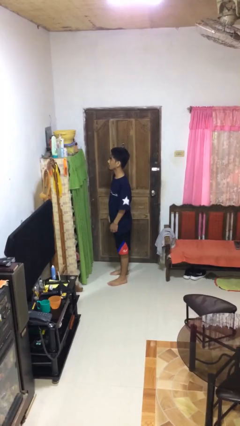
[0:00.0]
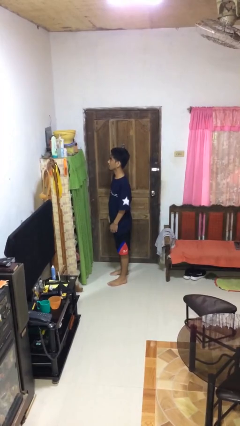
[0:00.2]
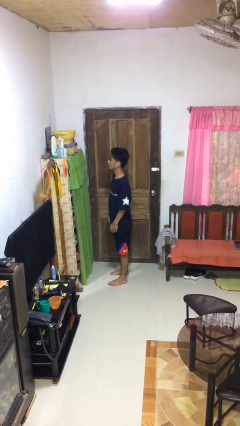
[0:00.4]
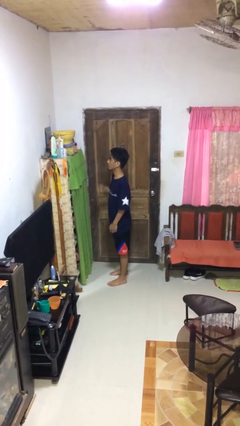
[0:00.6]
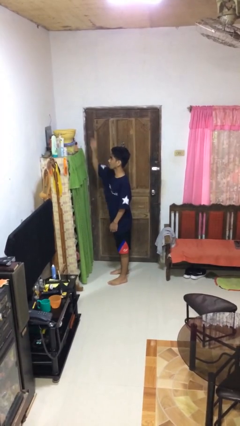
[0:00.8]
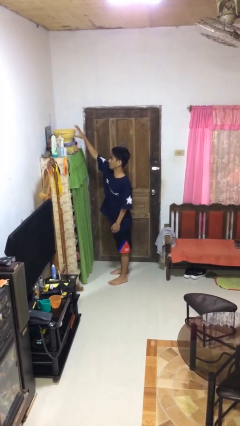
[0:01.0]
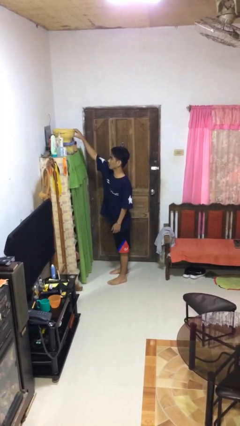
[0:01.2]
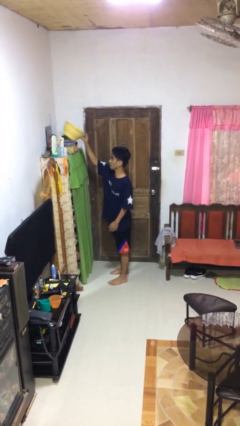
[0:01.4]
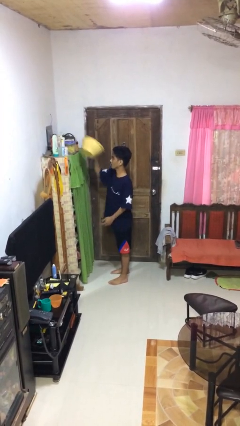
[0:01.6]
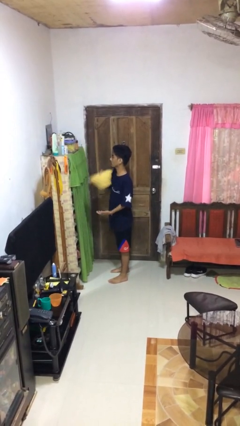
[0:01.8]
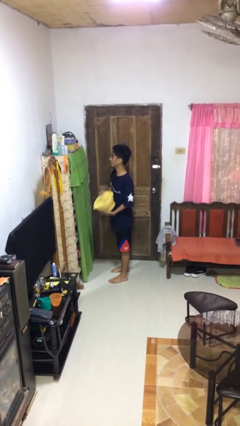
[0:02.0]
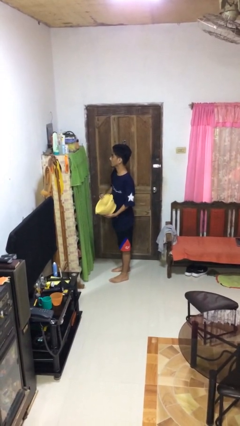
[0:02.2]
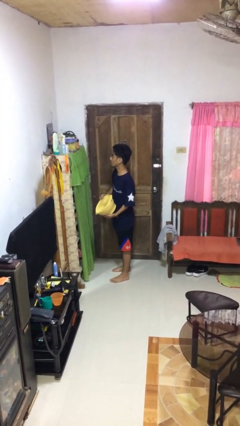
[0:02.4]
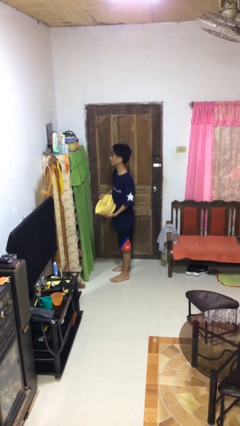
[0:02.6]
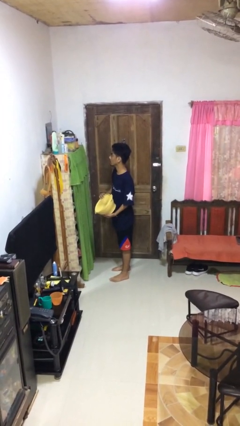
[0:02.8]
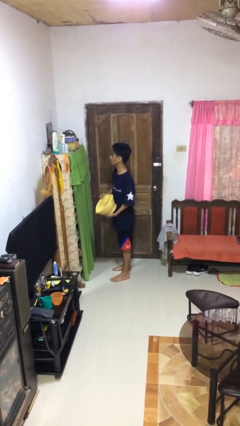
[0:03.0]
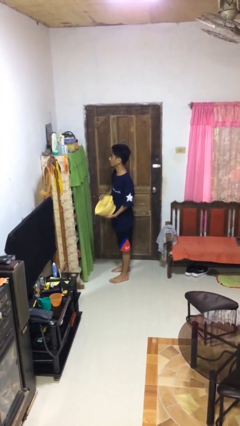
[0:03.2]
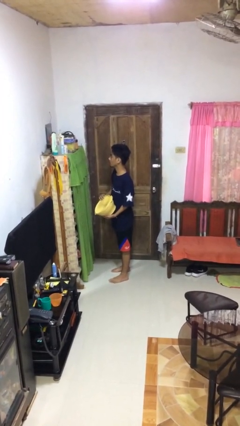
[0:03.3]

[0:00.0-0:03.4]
person picks up object from shelf

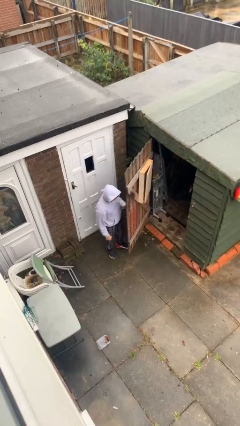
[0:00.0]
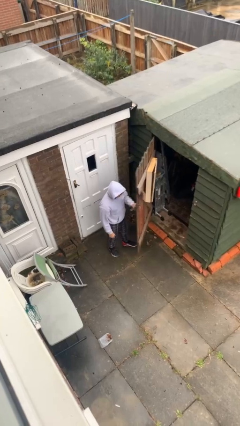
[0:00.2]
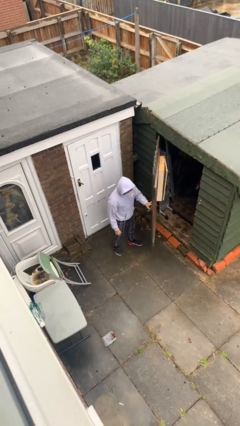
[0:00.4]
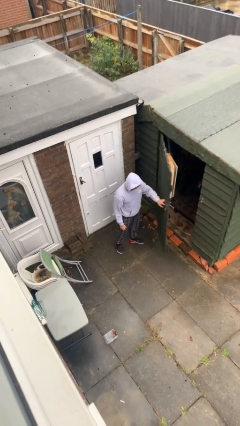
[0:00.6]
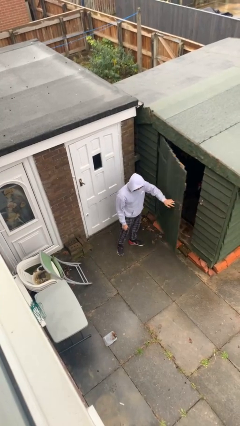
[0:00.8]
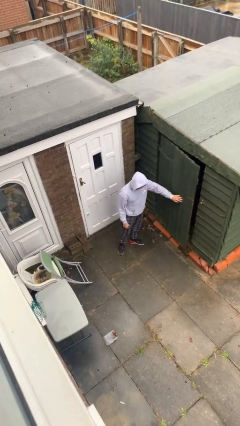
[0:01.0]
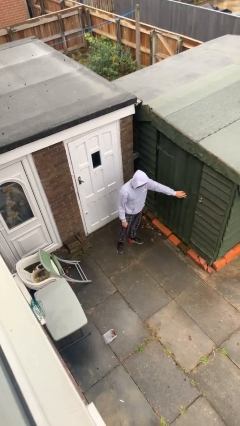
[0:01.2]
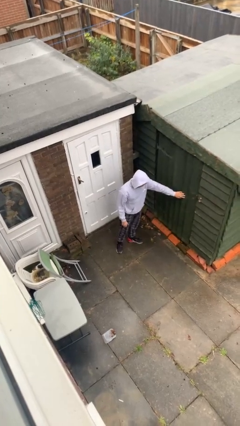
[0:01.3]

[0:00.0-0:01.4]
person closes facility door

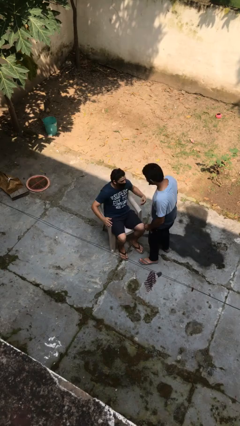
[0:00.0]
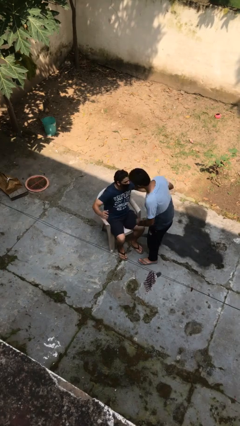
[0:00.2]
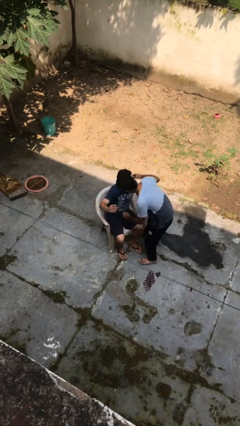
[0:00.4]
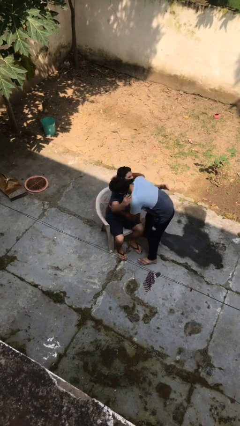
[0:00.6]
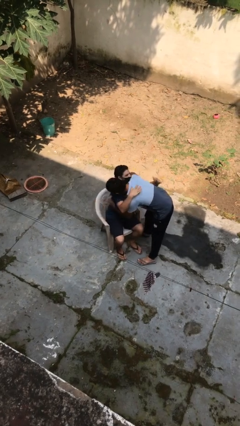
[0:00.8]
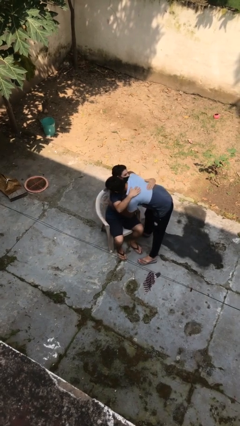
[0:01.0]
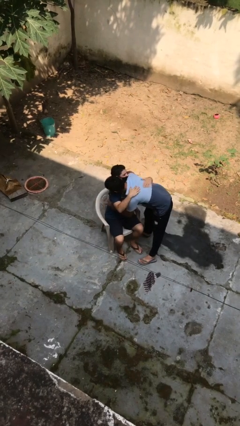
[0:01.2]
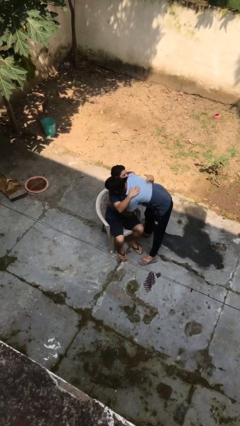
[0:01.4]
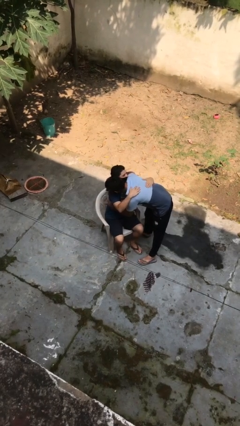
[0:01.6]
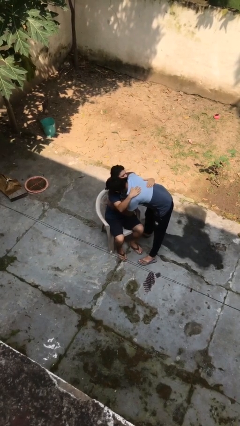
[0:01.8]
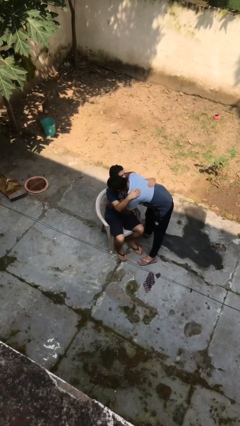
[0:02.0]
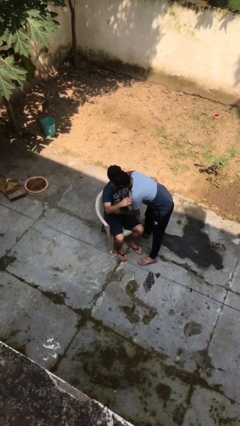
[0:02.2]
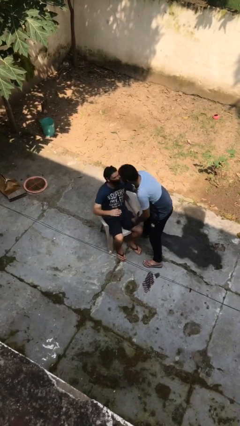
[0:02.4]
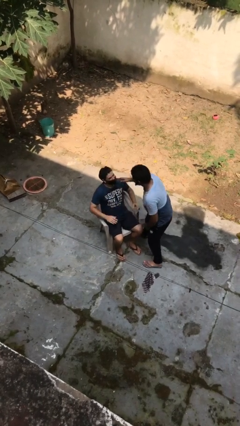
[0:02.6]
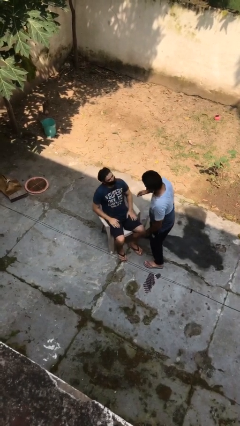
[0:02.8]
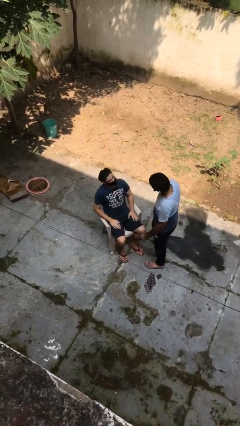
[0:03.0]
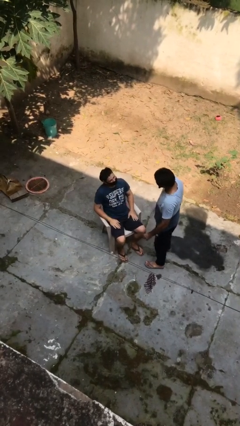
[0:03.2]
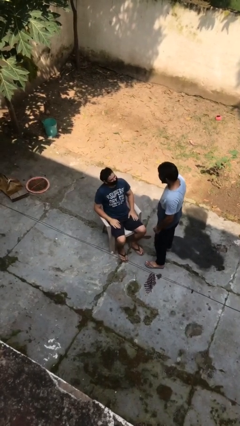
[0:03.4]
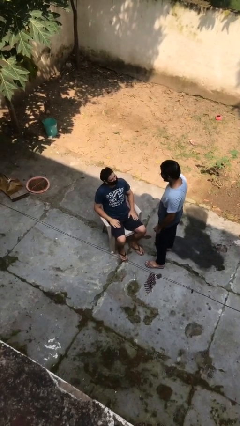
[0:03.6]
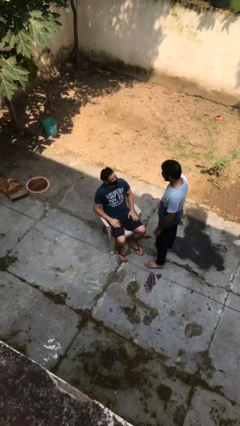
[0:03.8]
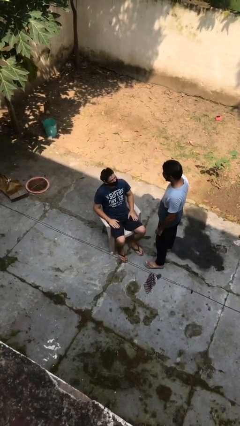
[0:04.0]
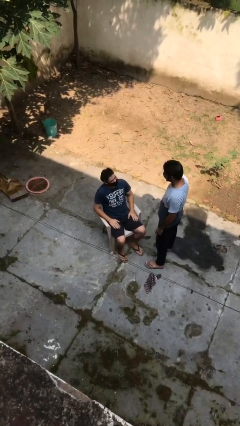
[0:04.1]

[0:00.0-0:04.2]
person embraces person

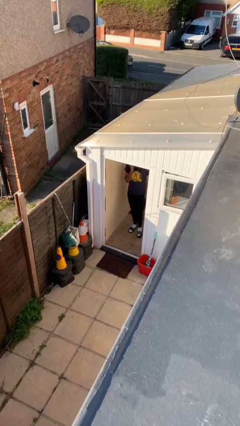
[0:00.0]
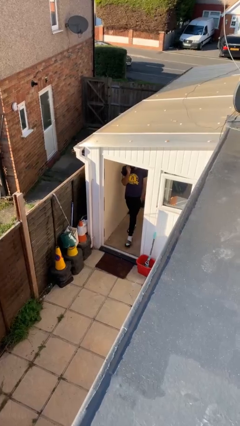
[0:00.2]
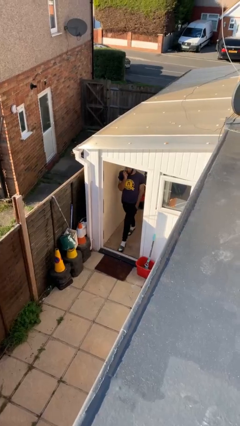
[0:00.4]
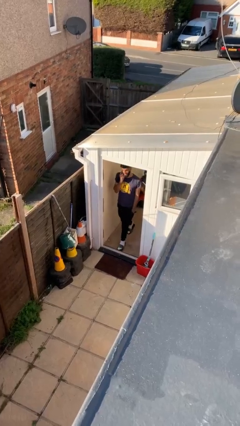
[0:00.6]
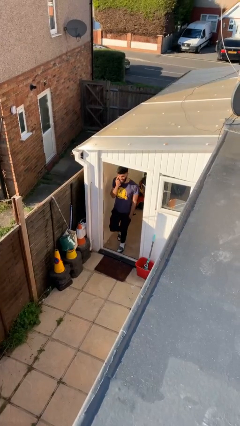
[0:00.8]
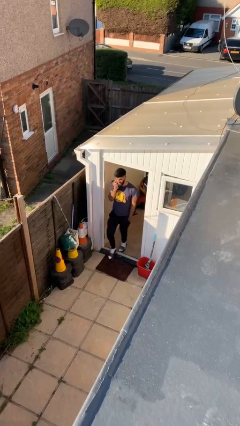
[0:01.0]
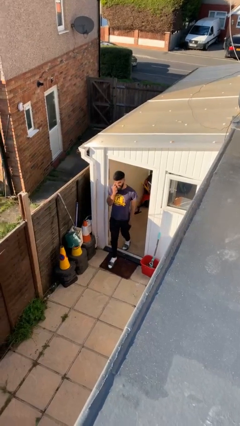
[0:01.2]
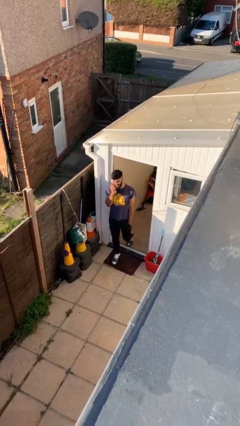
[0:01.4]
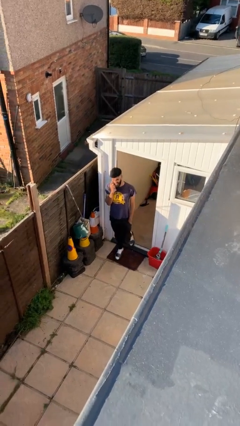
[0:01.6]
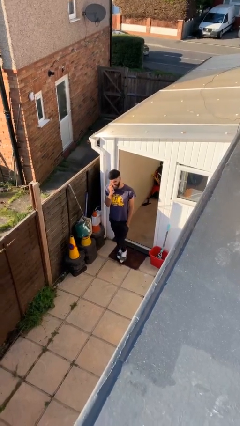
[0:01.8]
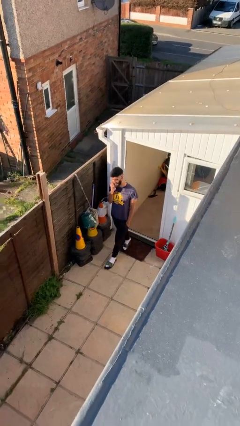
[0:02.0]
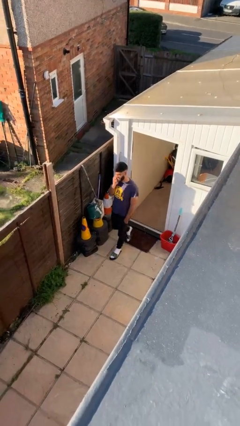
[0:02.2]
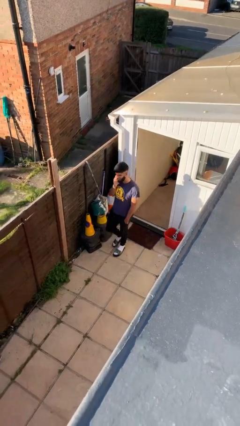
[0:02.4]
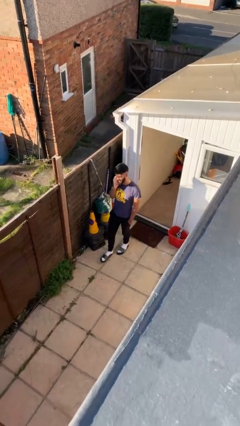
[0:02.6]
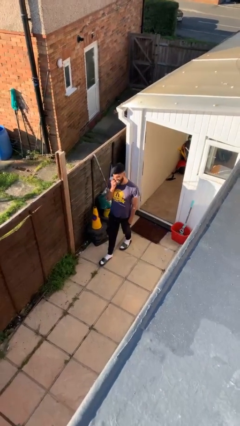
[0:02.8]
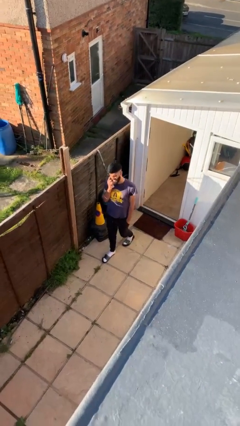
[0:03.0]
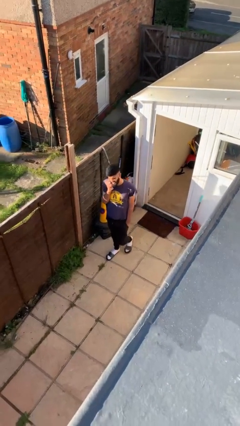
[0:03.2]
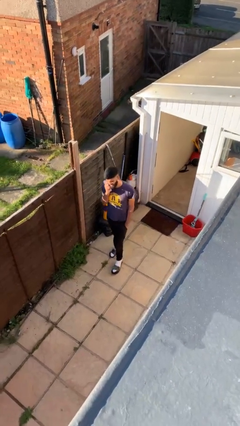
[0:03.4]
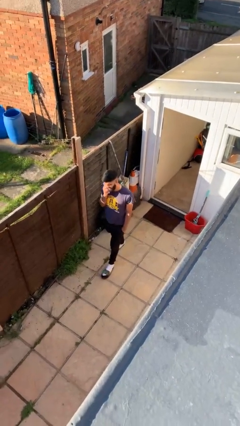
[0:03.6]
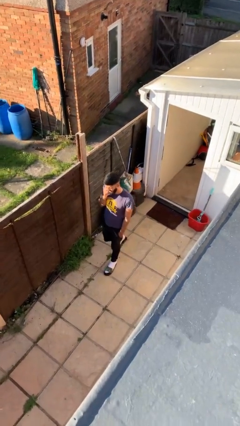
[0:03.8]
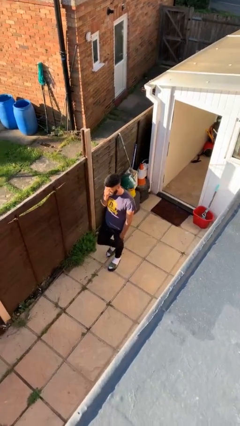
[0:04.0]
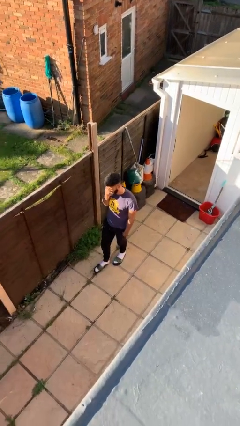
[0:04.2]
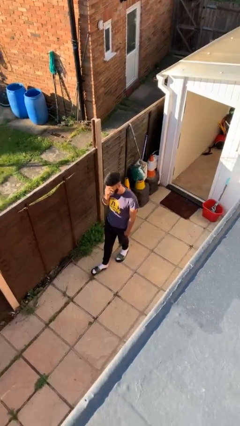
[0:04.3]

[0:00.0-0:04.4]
person enters scene through structure

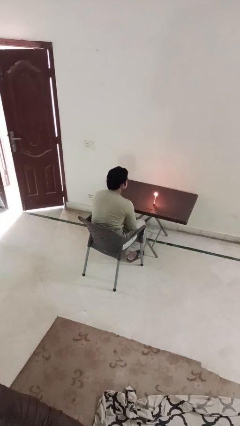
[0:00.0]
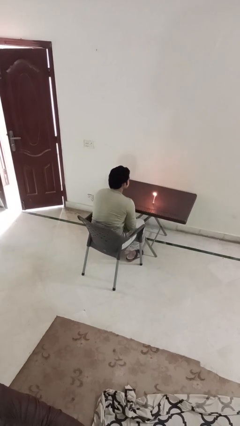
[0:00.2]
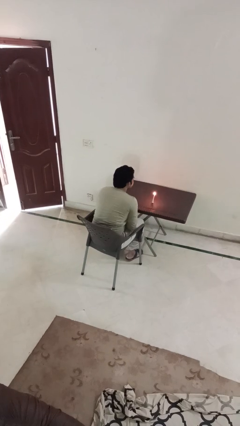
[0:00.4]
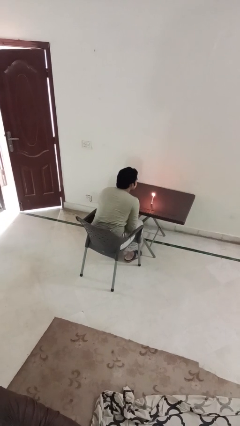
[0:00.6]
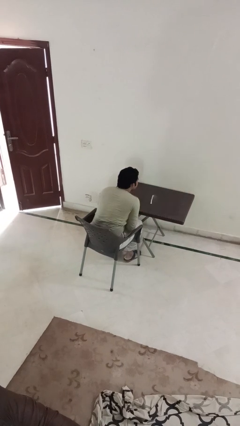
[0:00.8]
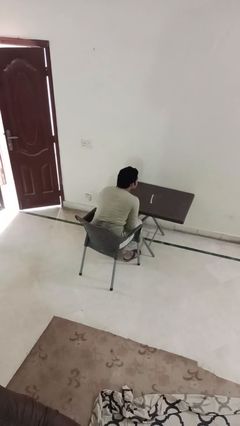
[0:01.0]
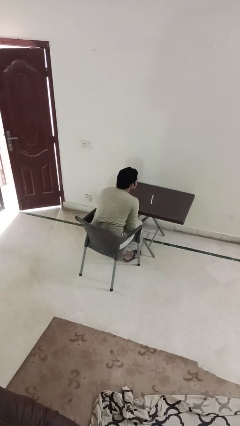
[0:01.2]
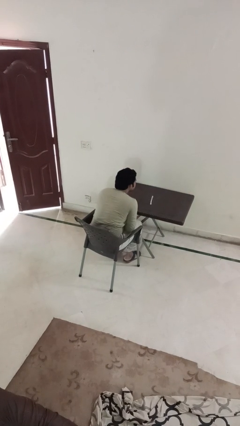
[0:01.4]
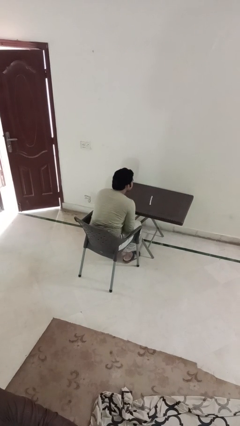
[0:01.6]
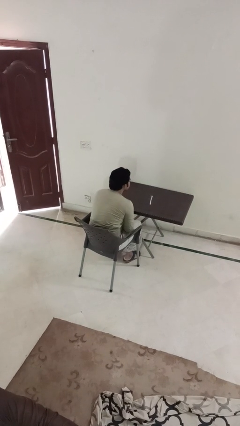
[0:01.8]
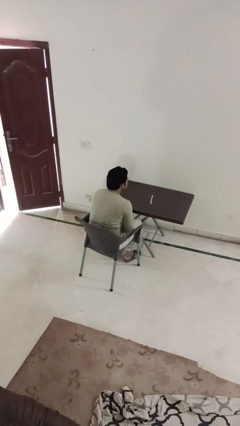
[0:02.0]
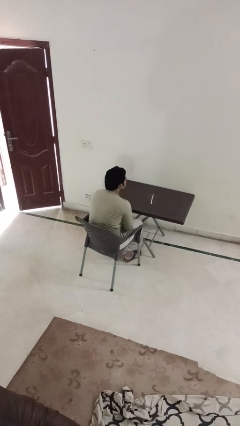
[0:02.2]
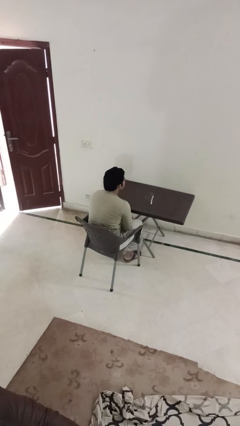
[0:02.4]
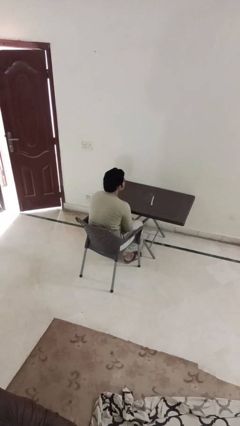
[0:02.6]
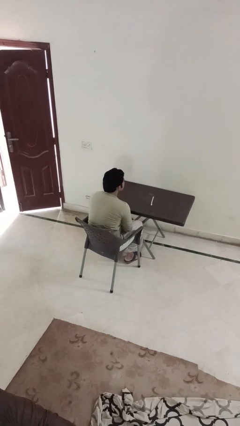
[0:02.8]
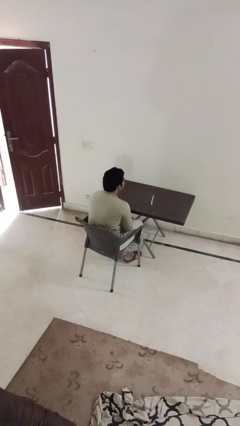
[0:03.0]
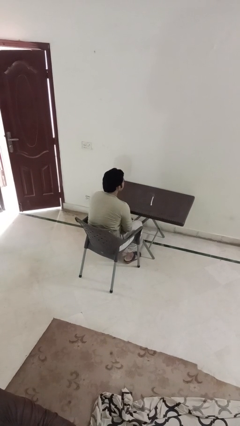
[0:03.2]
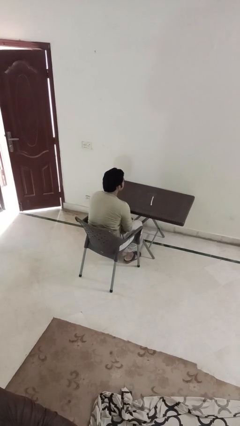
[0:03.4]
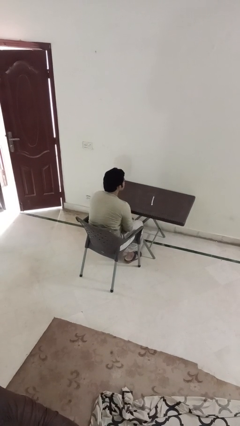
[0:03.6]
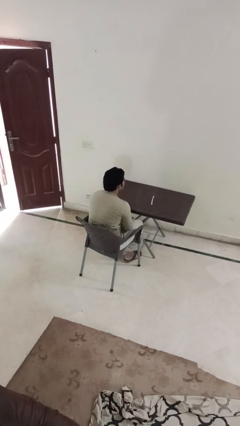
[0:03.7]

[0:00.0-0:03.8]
person extinguishes candle

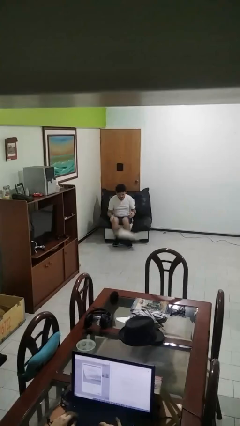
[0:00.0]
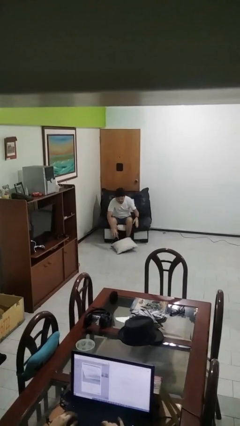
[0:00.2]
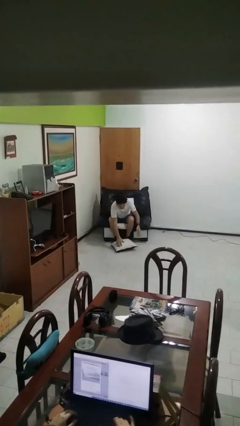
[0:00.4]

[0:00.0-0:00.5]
person drops object
